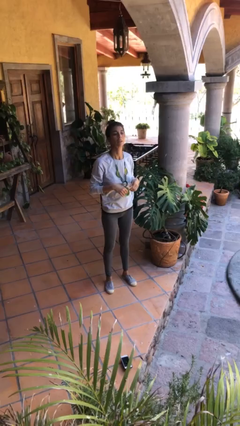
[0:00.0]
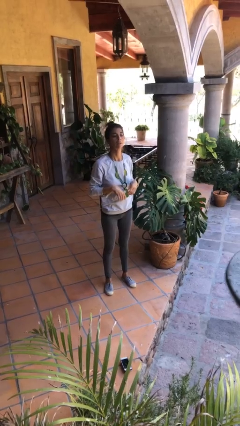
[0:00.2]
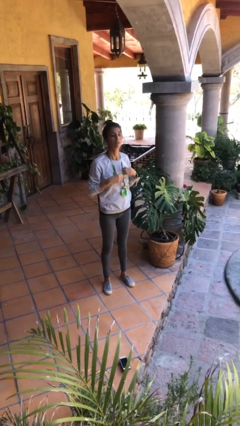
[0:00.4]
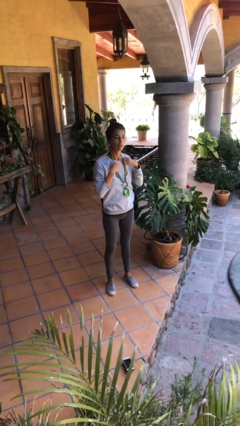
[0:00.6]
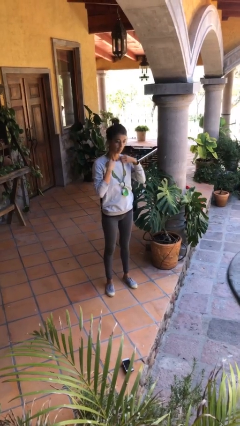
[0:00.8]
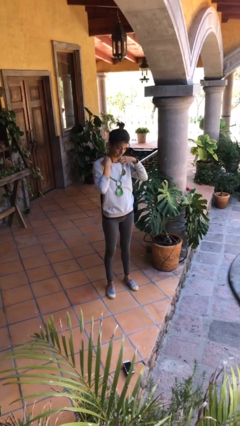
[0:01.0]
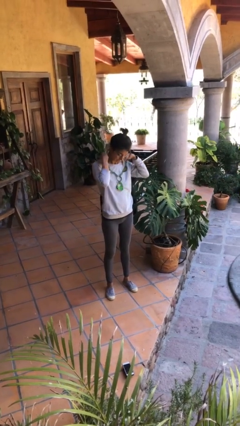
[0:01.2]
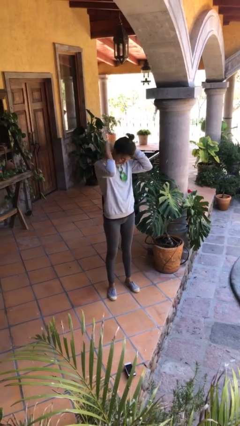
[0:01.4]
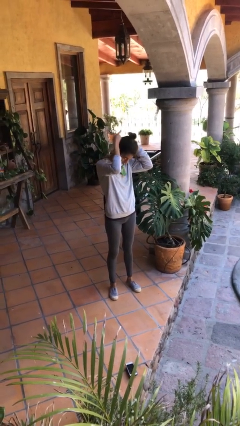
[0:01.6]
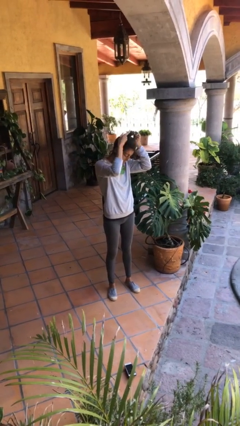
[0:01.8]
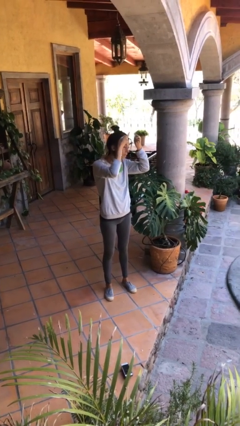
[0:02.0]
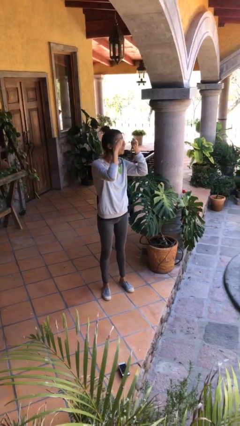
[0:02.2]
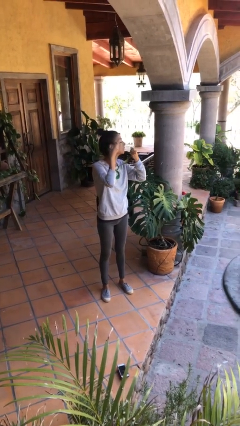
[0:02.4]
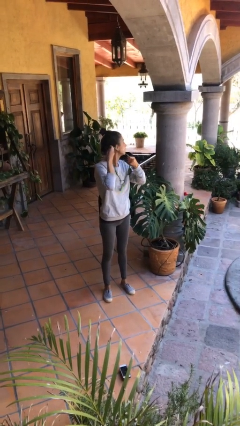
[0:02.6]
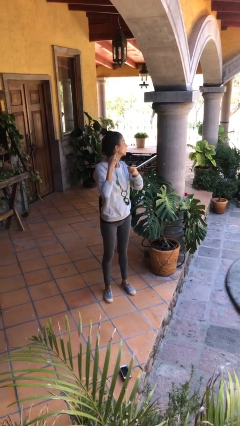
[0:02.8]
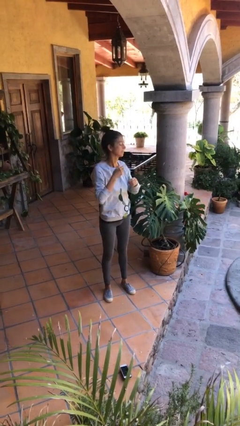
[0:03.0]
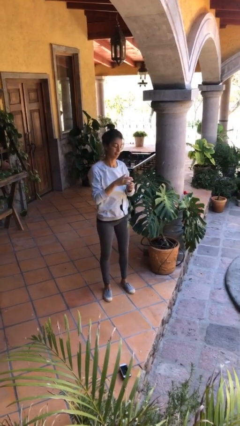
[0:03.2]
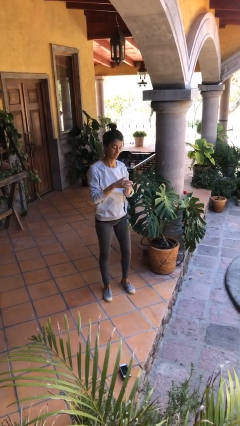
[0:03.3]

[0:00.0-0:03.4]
person takes off necklace

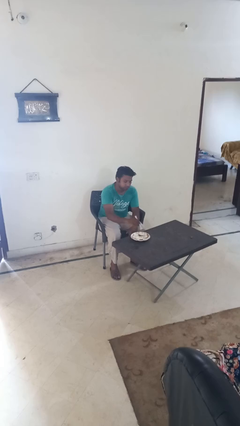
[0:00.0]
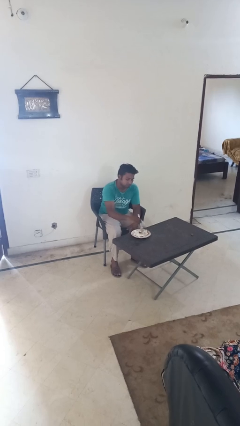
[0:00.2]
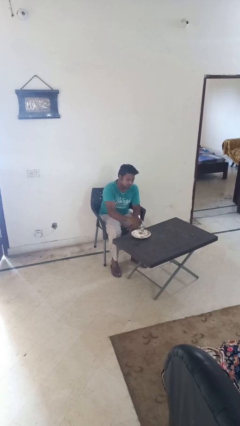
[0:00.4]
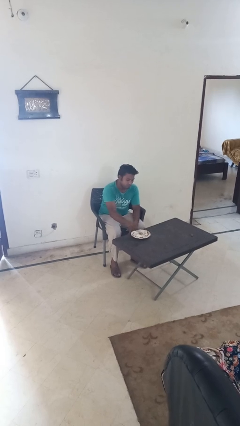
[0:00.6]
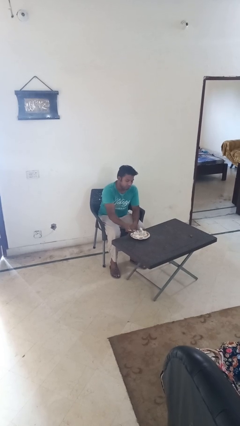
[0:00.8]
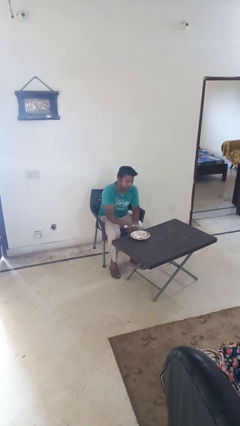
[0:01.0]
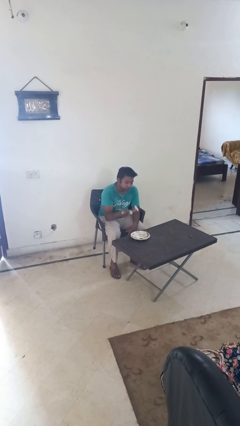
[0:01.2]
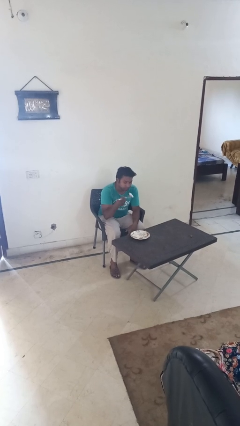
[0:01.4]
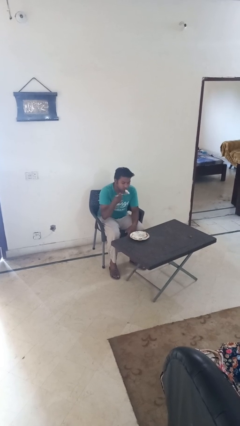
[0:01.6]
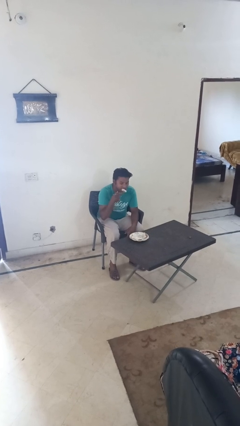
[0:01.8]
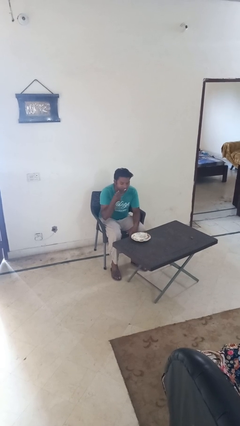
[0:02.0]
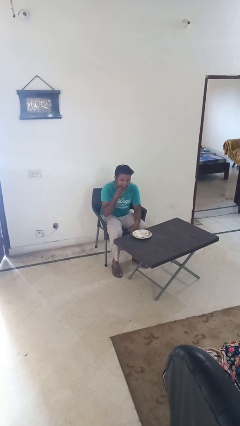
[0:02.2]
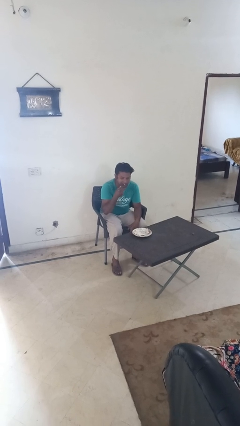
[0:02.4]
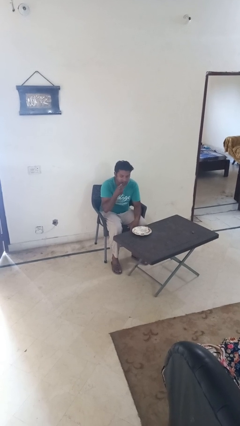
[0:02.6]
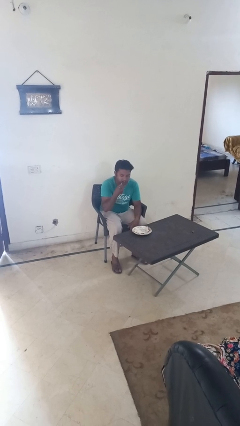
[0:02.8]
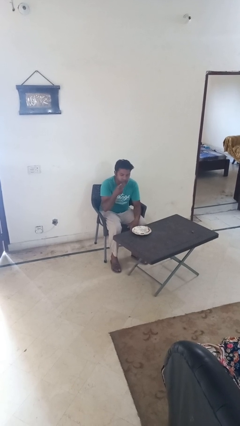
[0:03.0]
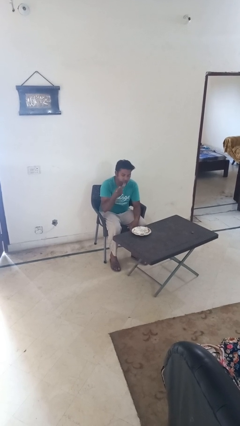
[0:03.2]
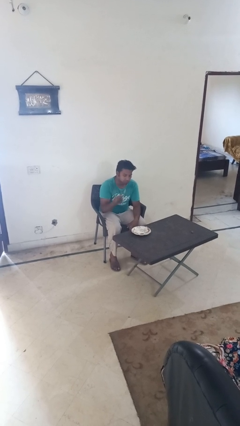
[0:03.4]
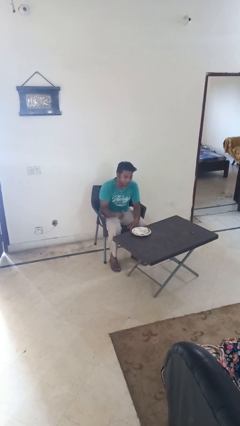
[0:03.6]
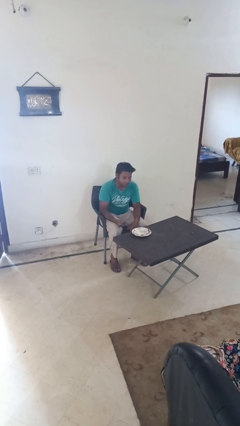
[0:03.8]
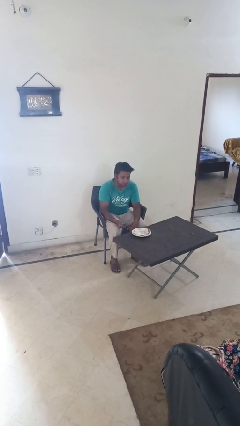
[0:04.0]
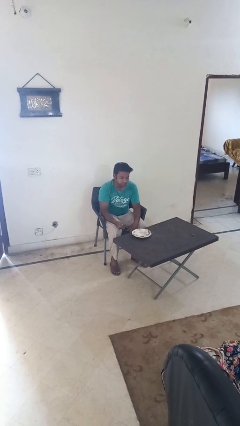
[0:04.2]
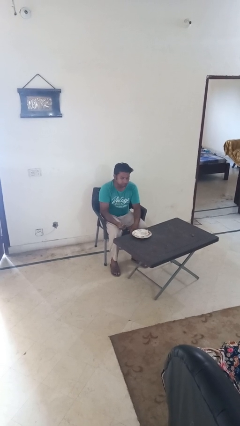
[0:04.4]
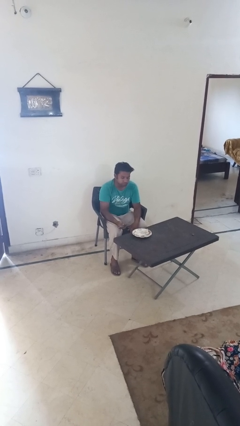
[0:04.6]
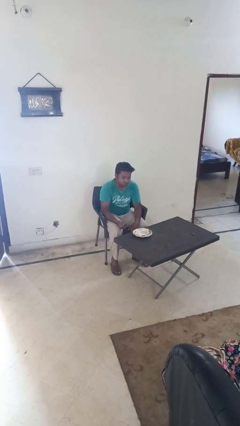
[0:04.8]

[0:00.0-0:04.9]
person eats with utensil

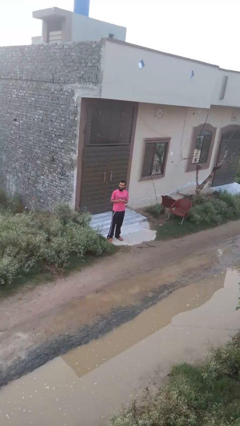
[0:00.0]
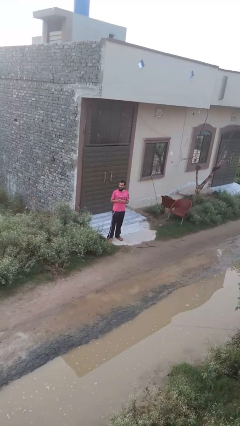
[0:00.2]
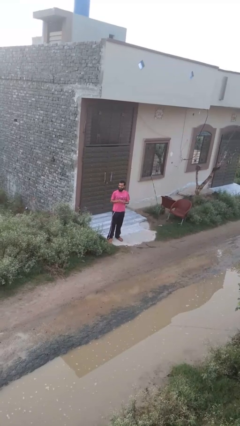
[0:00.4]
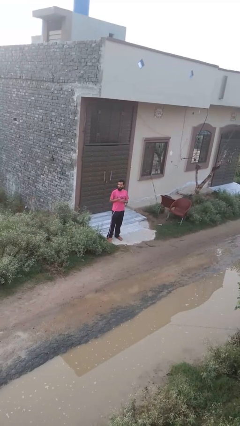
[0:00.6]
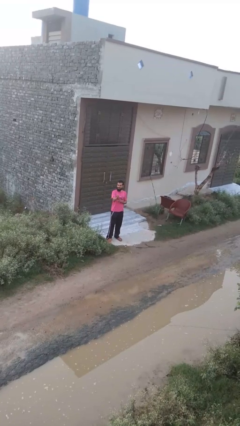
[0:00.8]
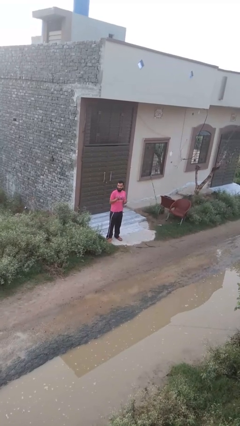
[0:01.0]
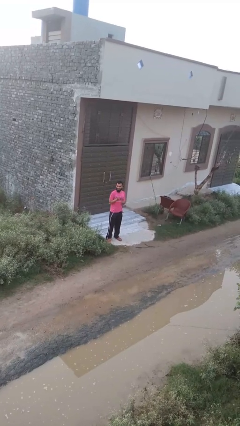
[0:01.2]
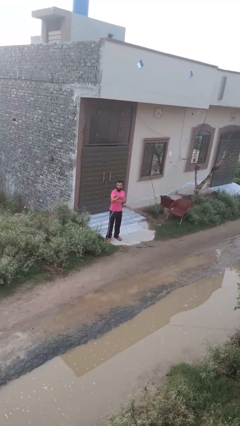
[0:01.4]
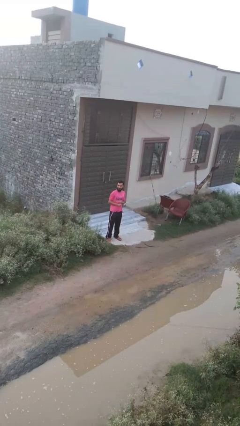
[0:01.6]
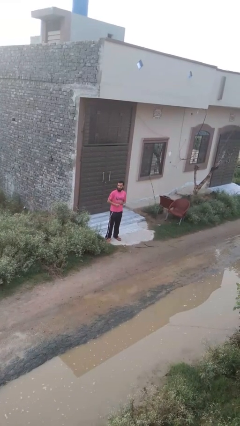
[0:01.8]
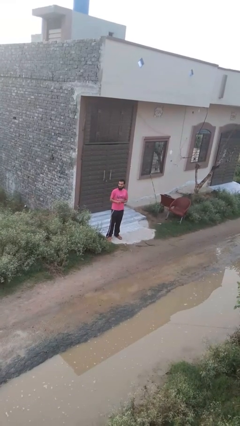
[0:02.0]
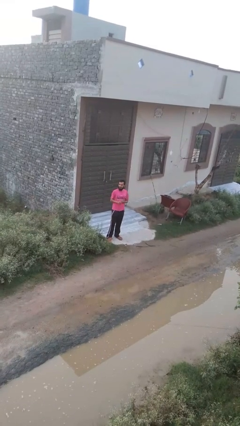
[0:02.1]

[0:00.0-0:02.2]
person punches

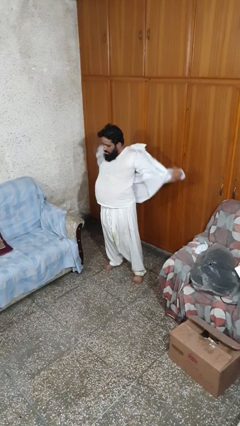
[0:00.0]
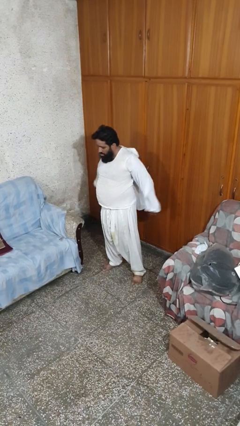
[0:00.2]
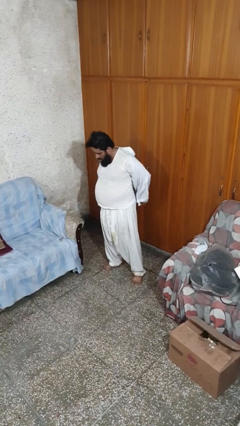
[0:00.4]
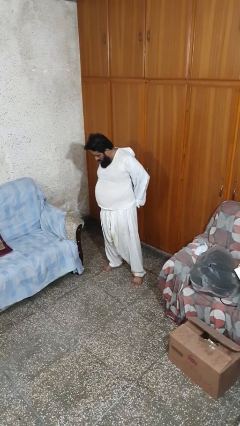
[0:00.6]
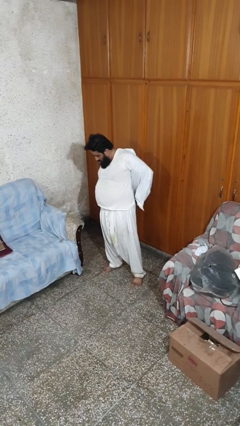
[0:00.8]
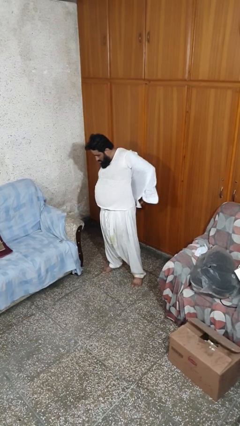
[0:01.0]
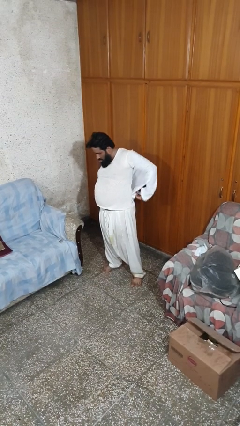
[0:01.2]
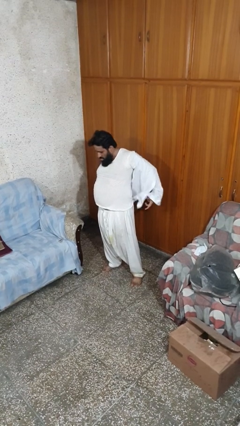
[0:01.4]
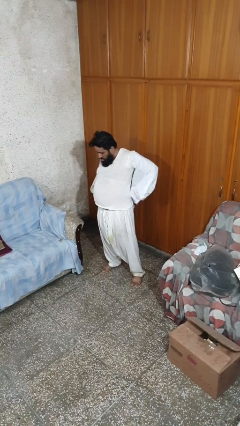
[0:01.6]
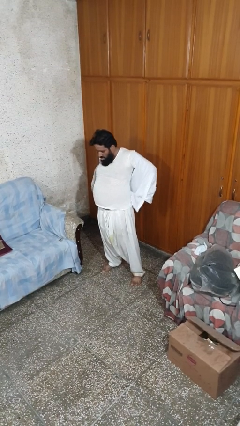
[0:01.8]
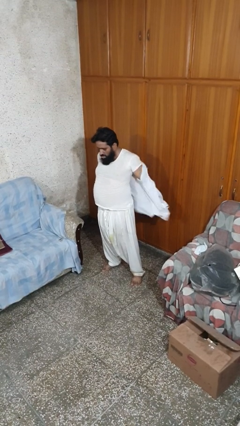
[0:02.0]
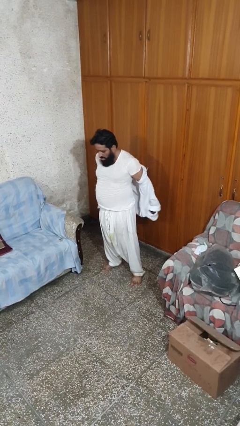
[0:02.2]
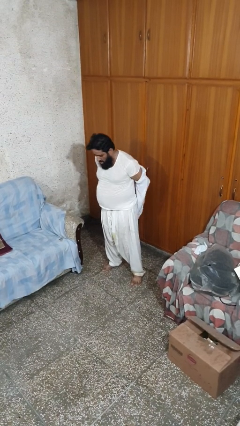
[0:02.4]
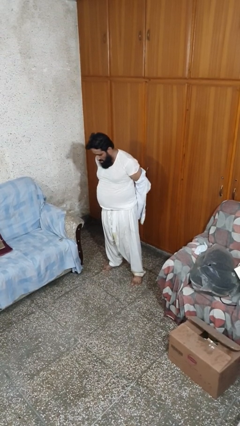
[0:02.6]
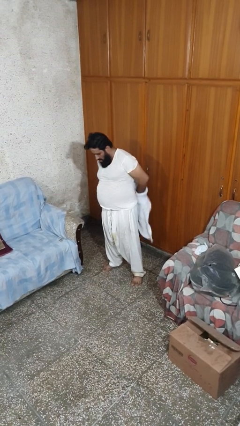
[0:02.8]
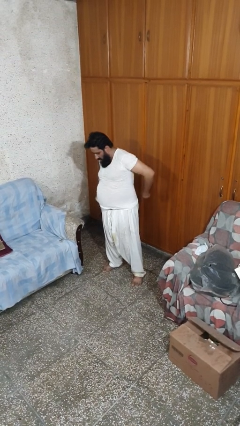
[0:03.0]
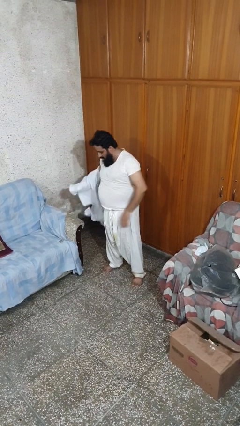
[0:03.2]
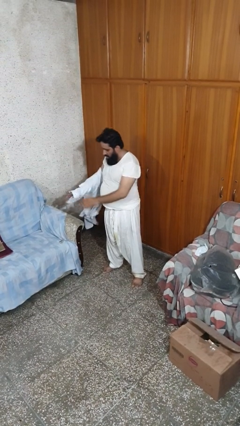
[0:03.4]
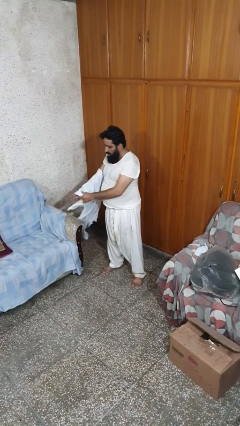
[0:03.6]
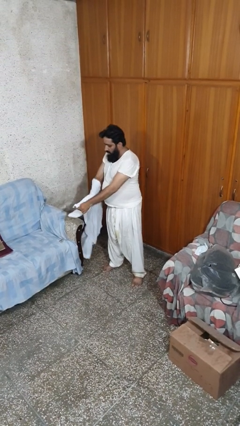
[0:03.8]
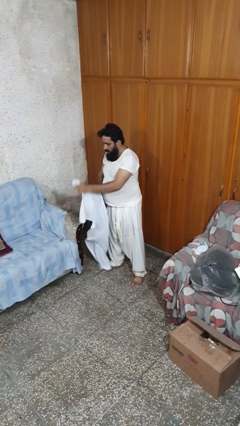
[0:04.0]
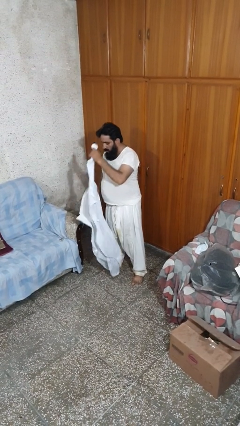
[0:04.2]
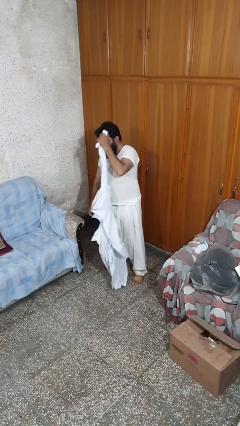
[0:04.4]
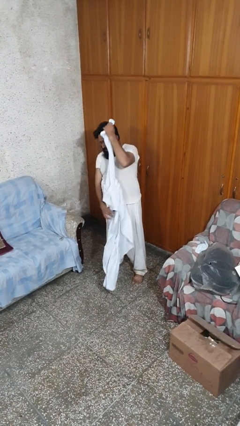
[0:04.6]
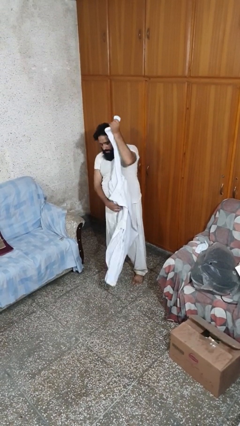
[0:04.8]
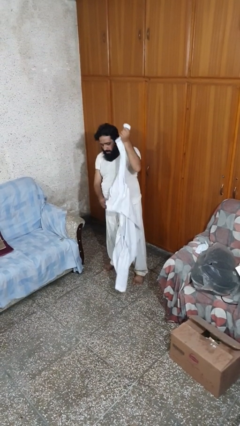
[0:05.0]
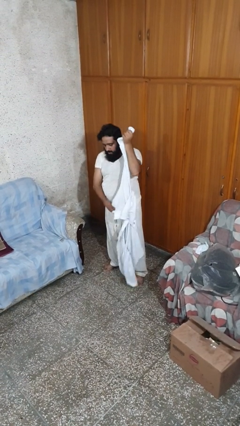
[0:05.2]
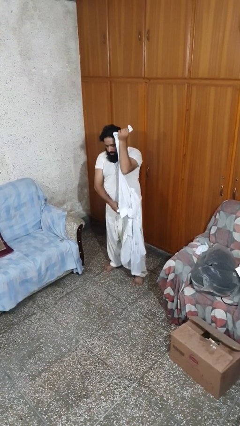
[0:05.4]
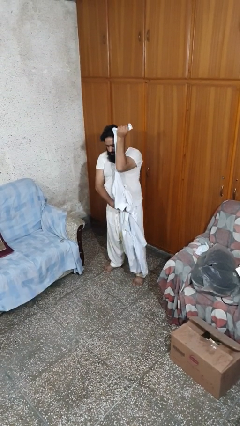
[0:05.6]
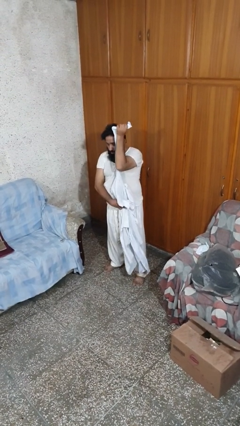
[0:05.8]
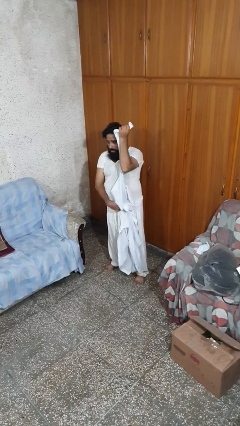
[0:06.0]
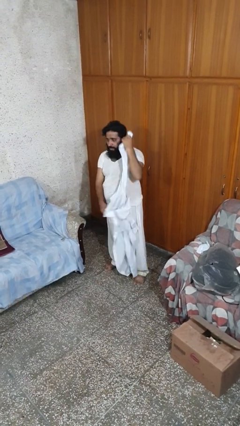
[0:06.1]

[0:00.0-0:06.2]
person takes off shirt

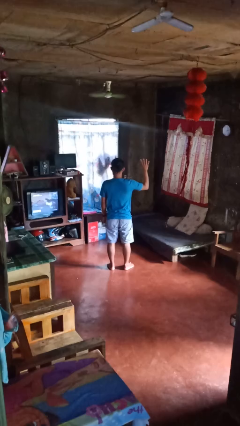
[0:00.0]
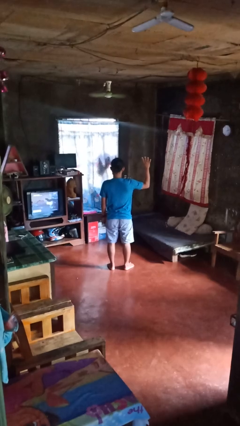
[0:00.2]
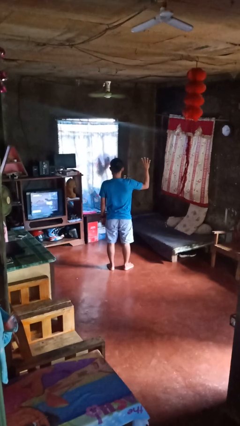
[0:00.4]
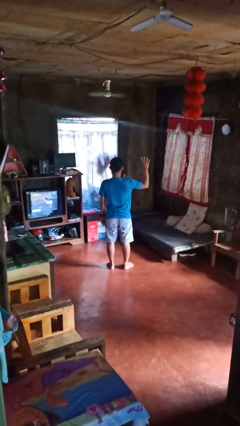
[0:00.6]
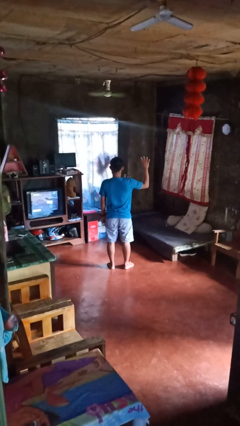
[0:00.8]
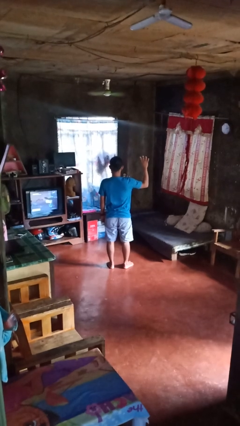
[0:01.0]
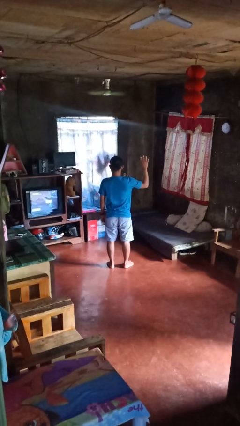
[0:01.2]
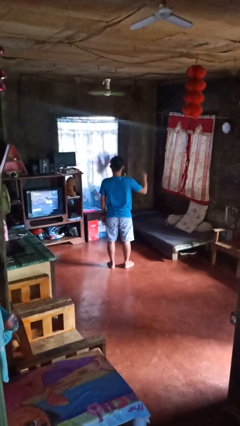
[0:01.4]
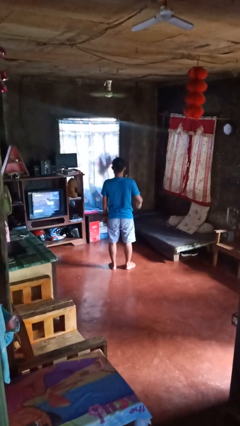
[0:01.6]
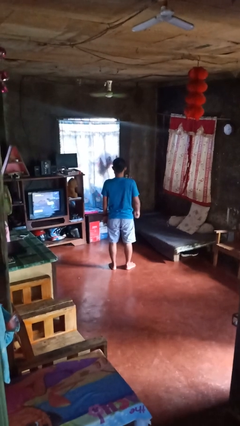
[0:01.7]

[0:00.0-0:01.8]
person gestures number four
